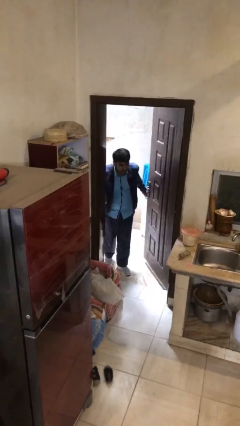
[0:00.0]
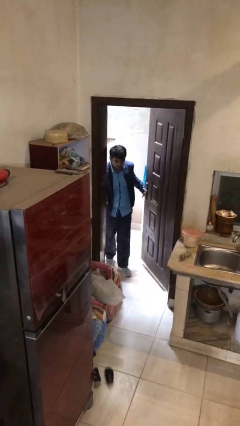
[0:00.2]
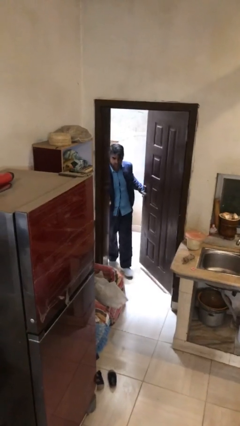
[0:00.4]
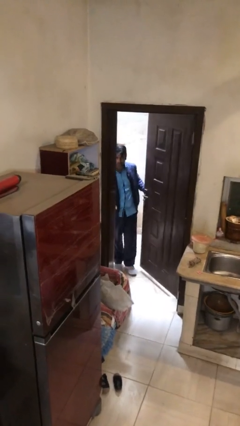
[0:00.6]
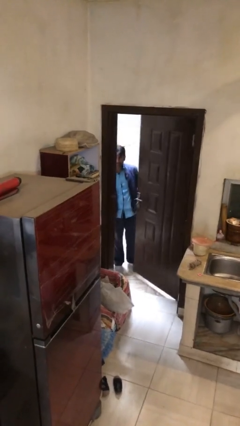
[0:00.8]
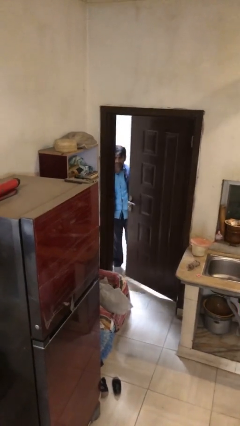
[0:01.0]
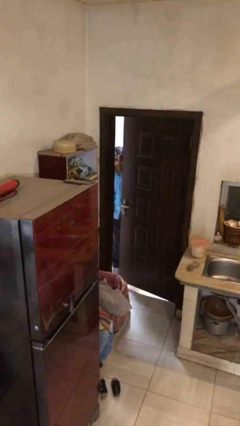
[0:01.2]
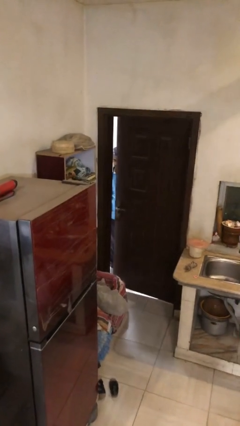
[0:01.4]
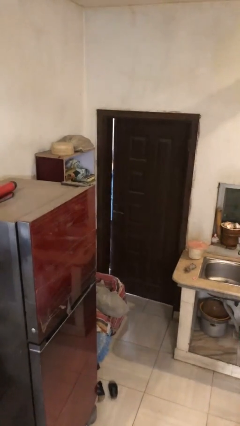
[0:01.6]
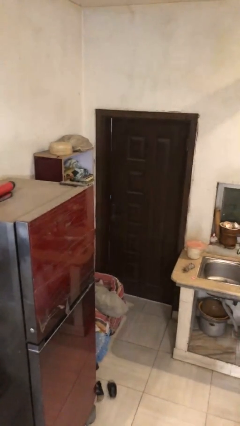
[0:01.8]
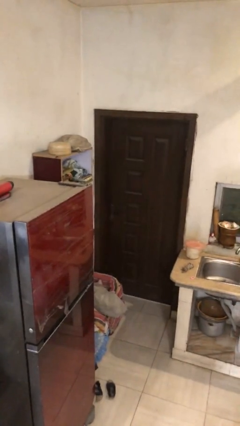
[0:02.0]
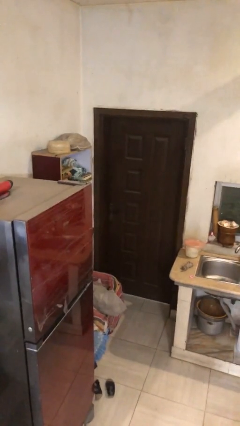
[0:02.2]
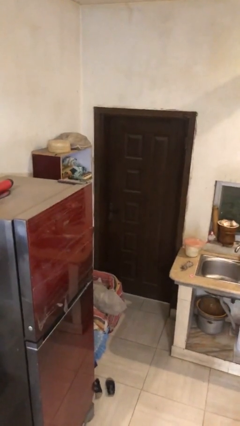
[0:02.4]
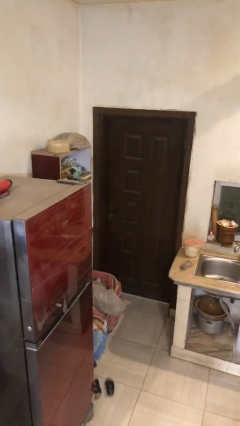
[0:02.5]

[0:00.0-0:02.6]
person closes facility door

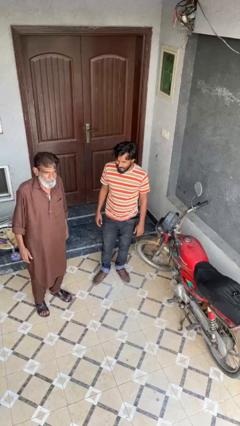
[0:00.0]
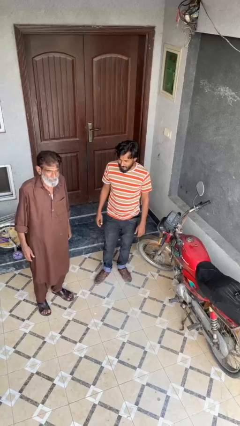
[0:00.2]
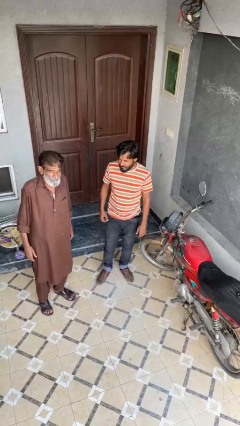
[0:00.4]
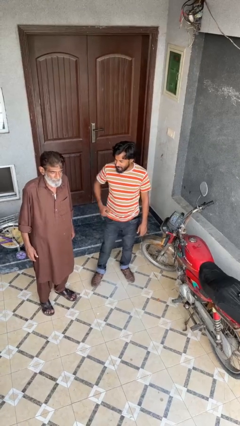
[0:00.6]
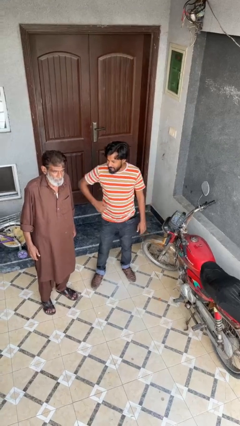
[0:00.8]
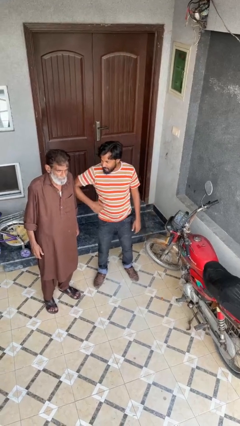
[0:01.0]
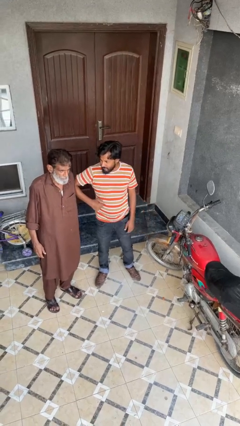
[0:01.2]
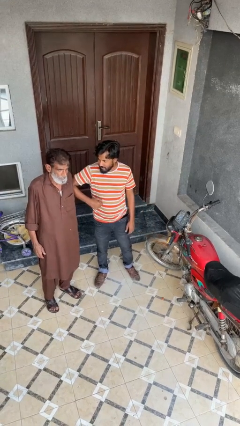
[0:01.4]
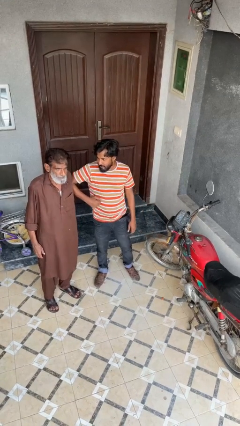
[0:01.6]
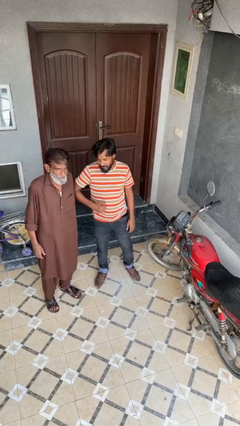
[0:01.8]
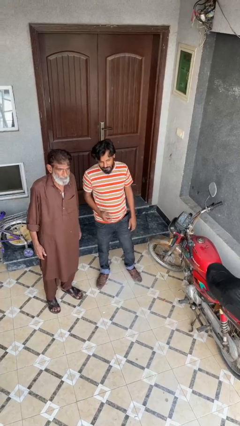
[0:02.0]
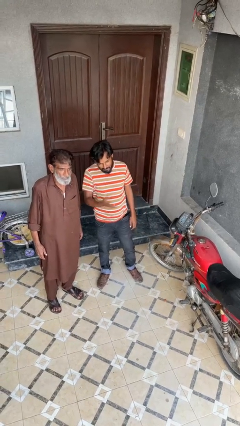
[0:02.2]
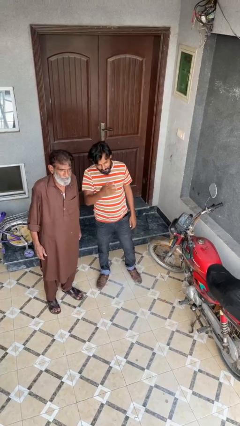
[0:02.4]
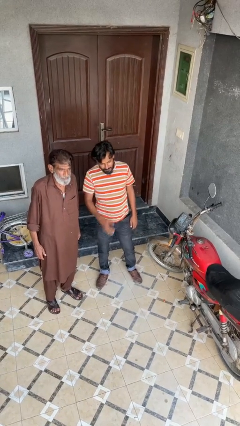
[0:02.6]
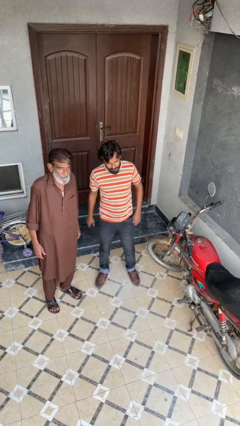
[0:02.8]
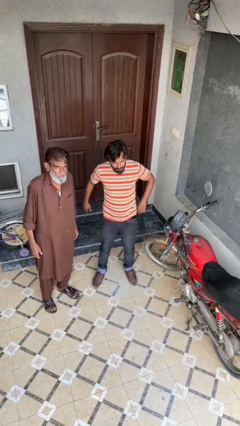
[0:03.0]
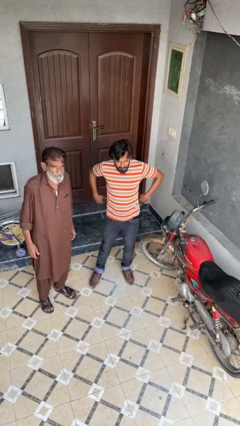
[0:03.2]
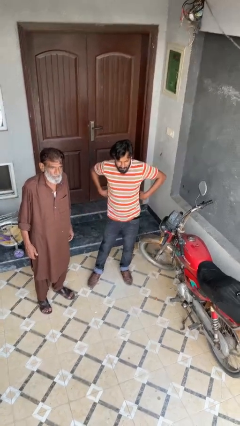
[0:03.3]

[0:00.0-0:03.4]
person nudges person with elbow

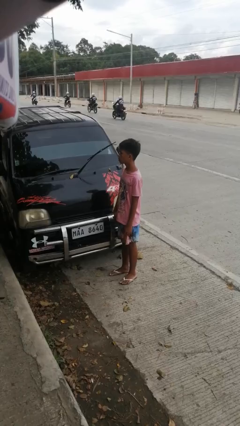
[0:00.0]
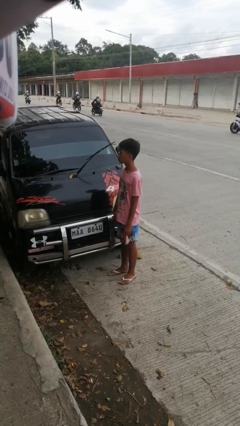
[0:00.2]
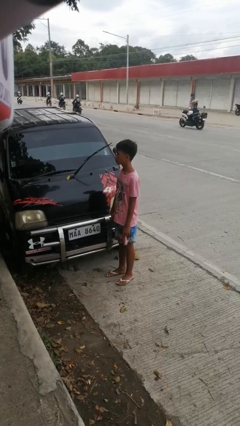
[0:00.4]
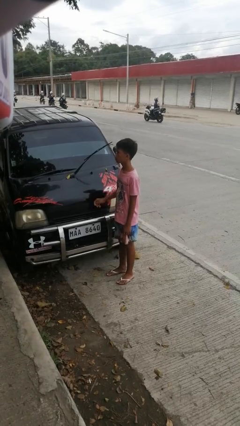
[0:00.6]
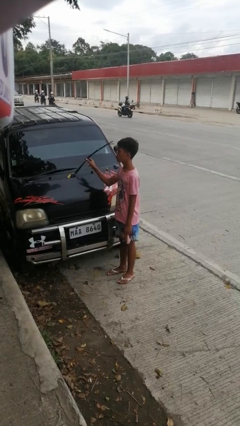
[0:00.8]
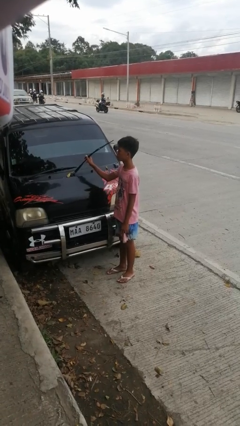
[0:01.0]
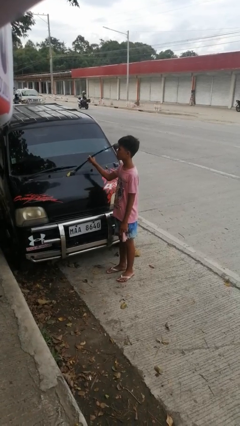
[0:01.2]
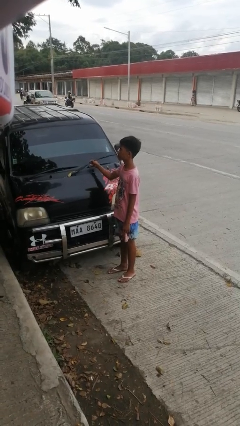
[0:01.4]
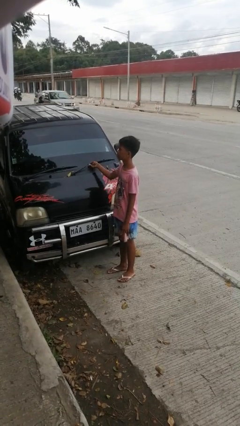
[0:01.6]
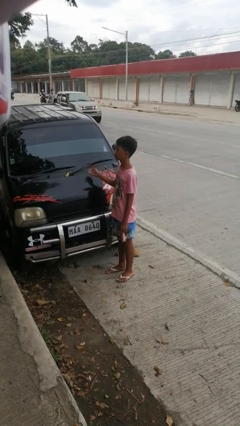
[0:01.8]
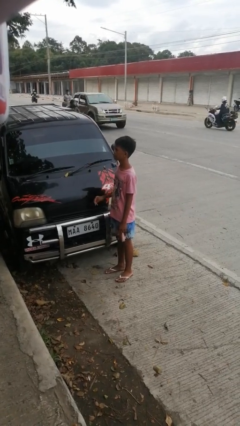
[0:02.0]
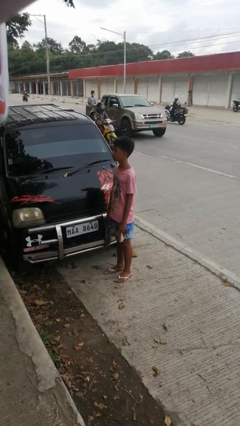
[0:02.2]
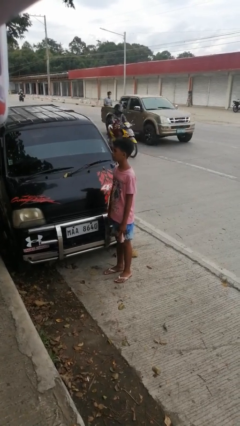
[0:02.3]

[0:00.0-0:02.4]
person flips down car wipers

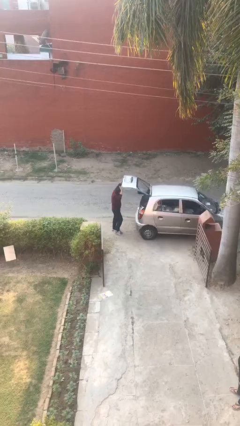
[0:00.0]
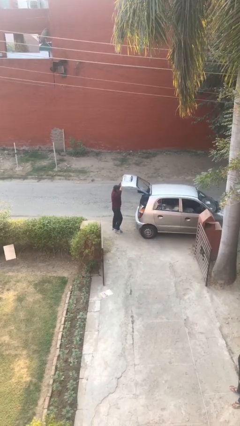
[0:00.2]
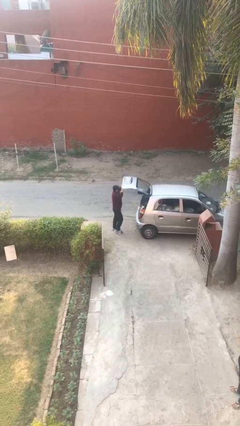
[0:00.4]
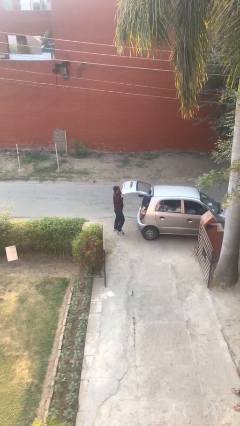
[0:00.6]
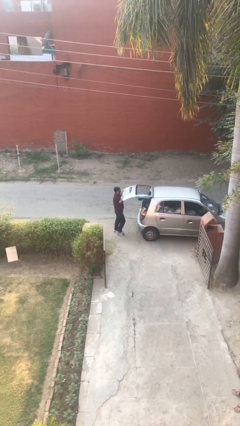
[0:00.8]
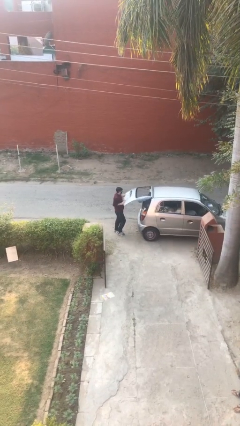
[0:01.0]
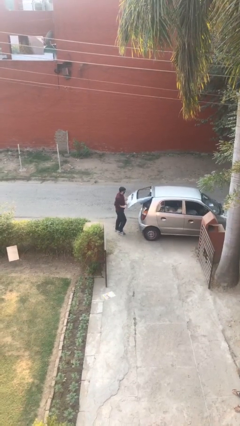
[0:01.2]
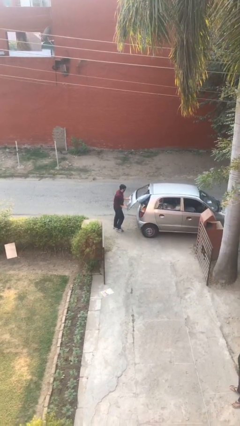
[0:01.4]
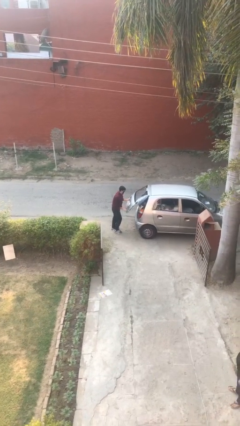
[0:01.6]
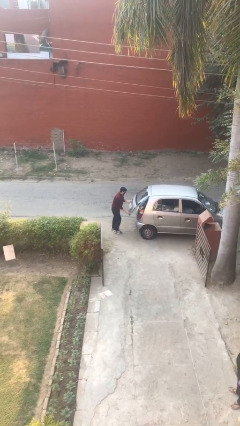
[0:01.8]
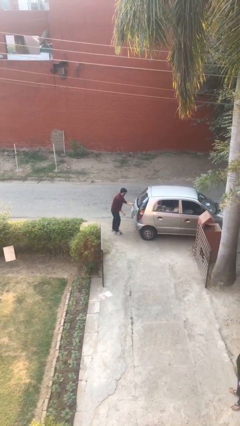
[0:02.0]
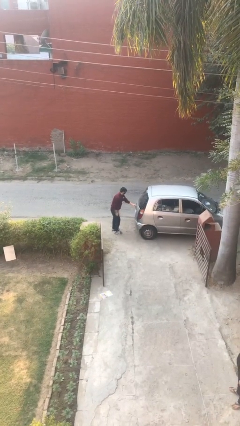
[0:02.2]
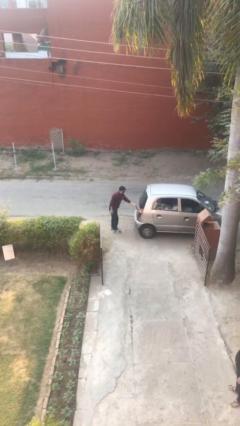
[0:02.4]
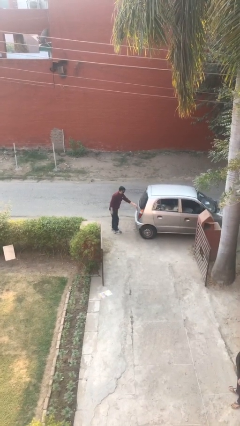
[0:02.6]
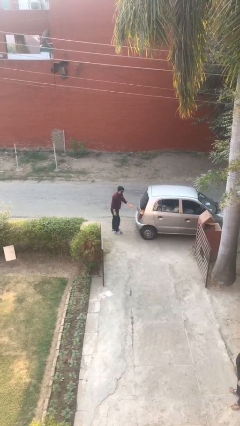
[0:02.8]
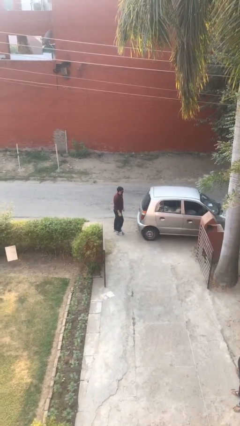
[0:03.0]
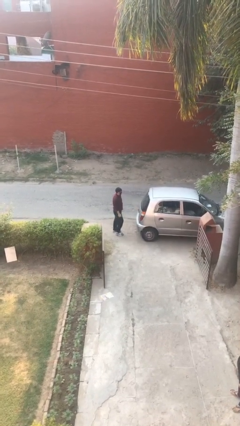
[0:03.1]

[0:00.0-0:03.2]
person closes car trunk

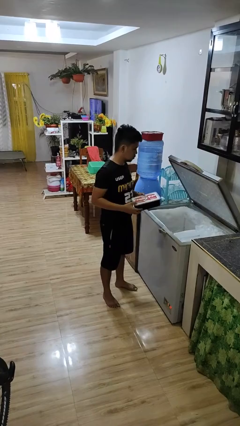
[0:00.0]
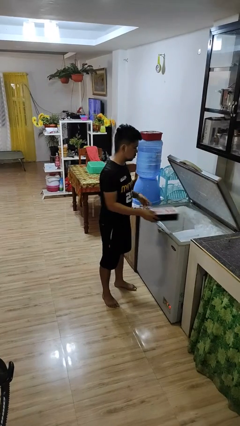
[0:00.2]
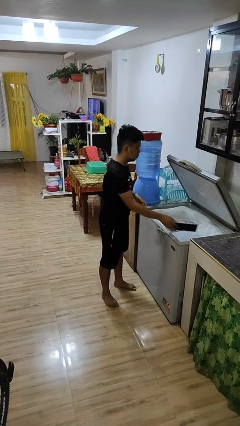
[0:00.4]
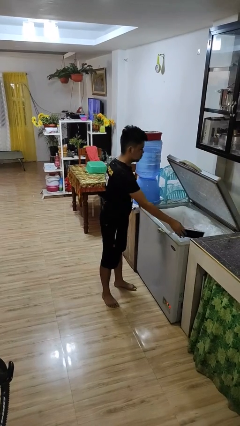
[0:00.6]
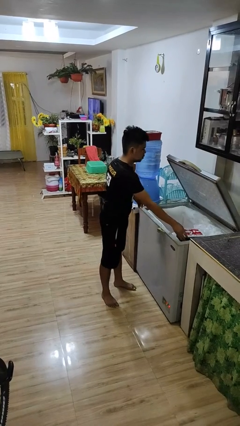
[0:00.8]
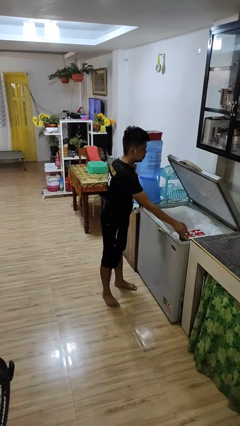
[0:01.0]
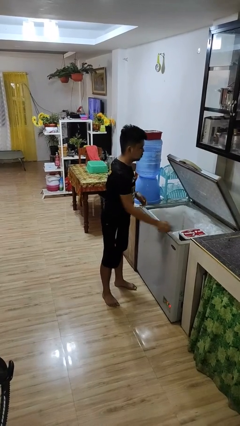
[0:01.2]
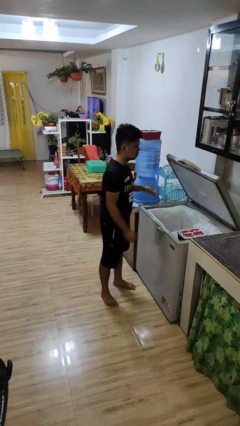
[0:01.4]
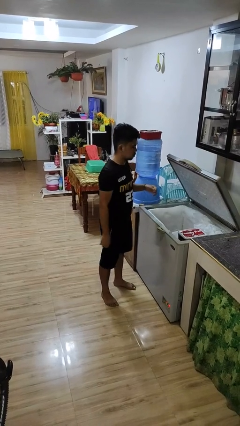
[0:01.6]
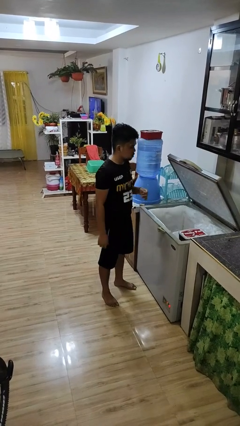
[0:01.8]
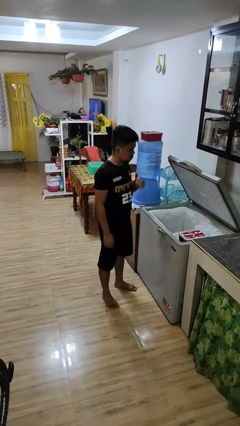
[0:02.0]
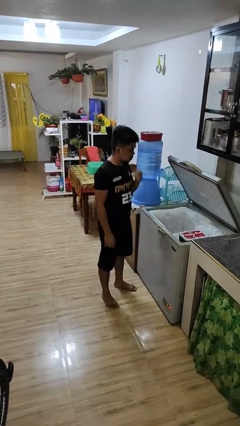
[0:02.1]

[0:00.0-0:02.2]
person puts object into refrigerator

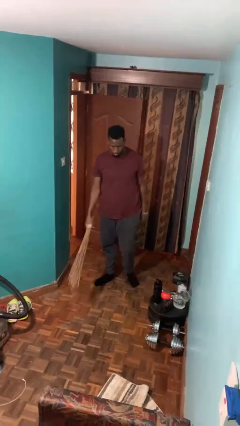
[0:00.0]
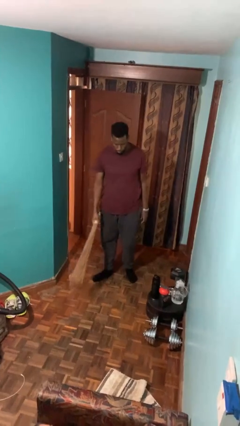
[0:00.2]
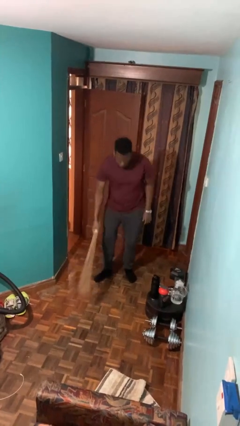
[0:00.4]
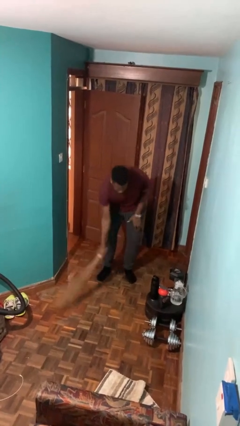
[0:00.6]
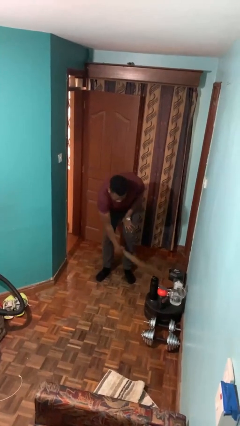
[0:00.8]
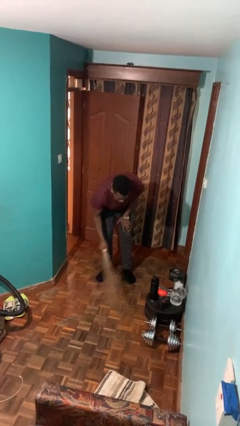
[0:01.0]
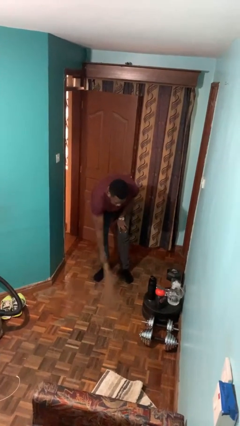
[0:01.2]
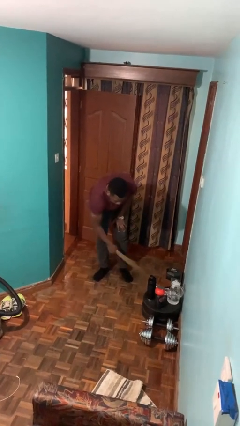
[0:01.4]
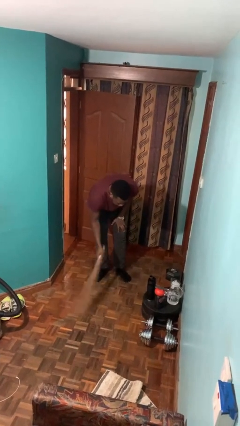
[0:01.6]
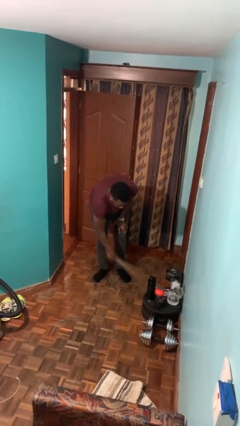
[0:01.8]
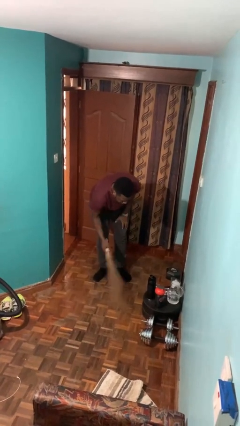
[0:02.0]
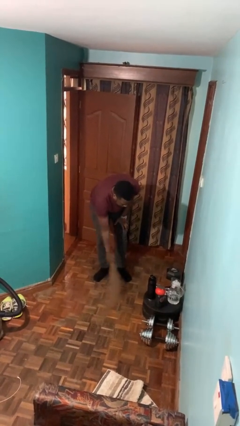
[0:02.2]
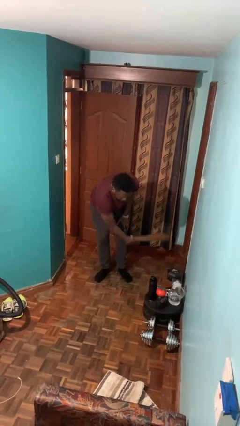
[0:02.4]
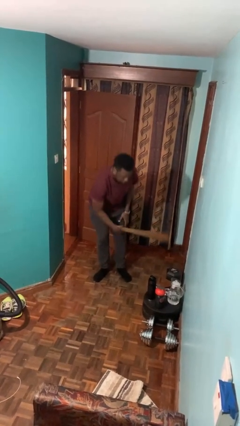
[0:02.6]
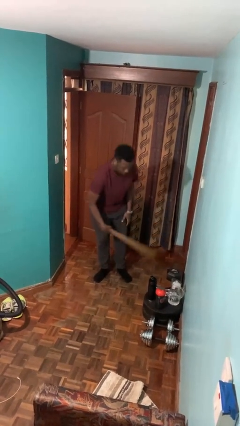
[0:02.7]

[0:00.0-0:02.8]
person sweeps floor

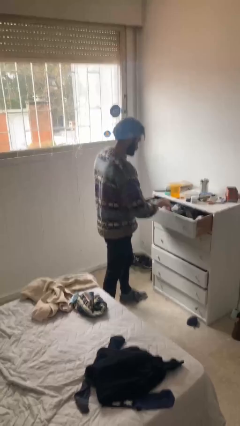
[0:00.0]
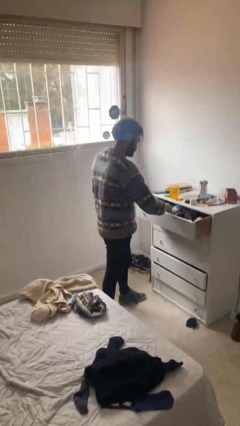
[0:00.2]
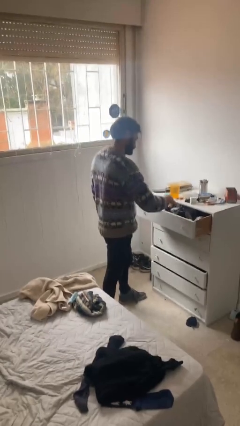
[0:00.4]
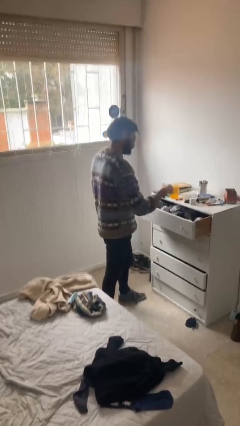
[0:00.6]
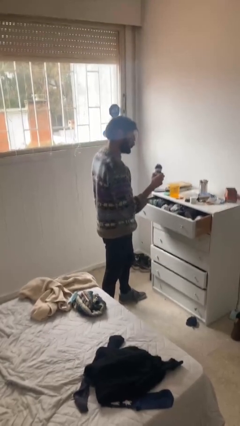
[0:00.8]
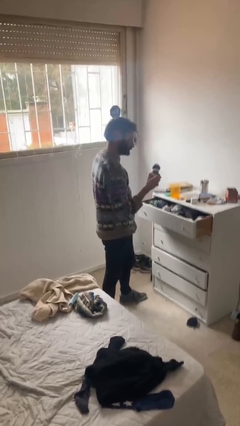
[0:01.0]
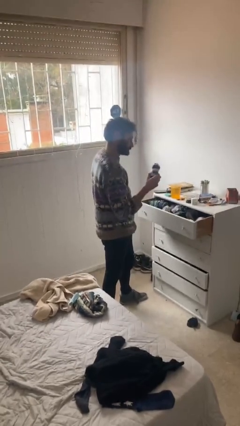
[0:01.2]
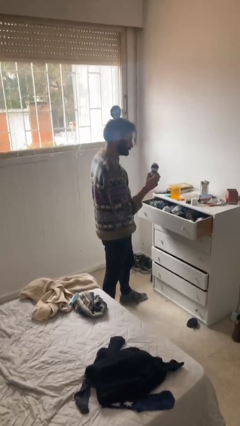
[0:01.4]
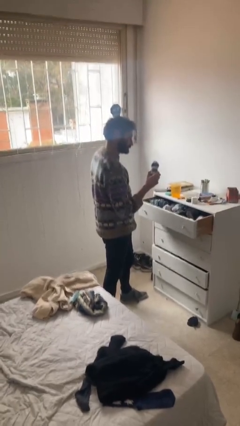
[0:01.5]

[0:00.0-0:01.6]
person takes clothes from dresser
